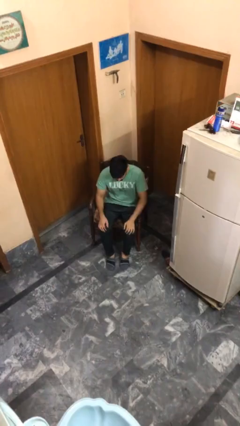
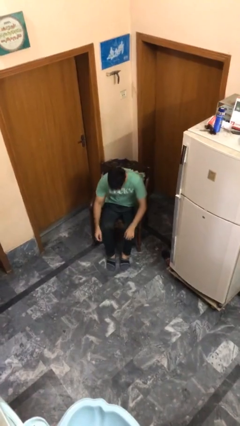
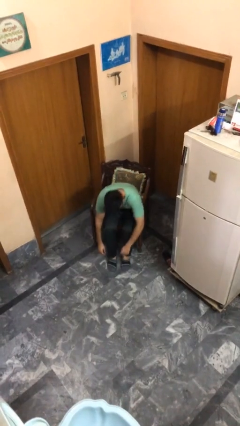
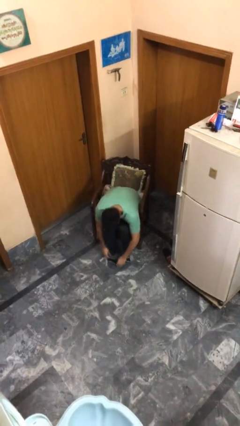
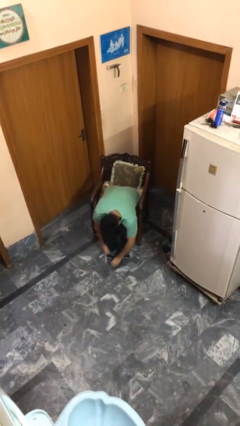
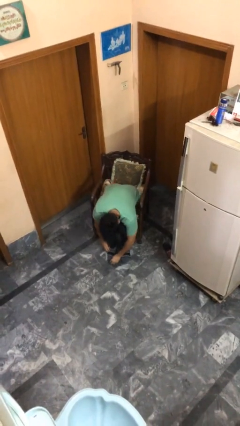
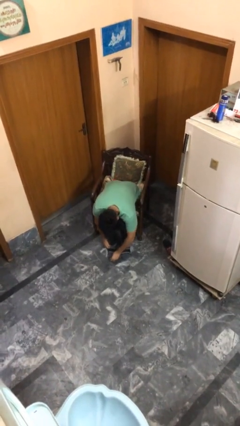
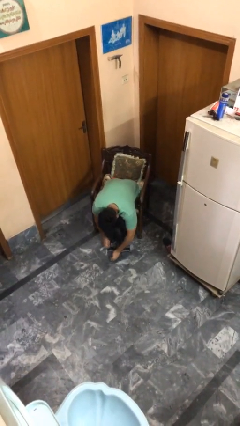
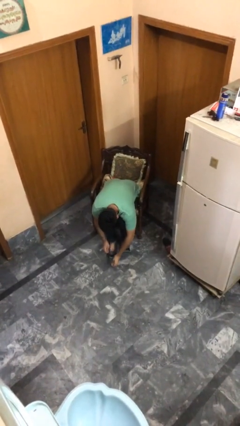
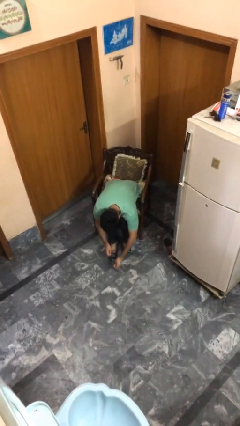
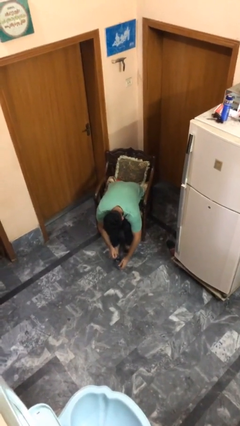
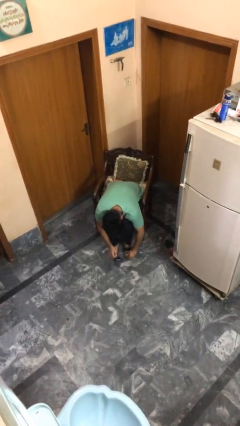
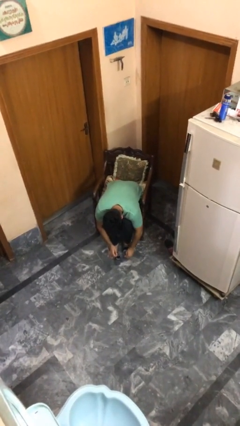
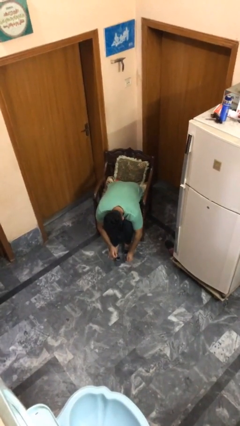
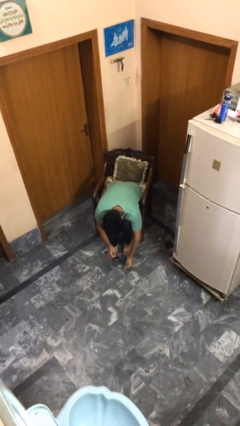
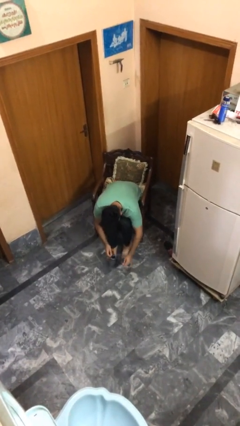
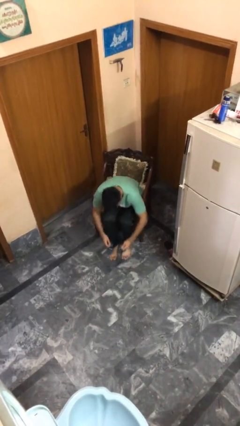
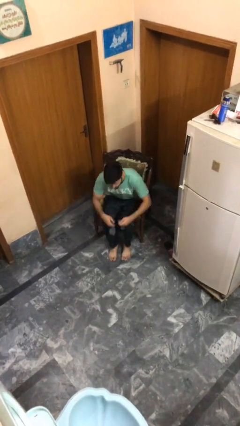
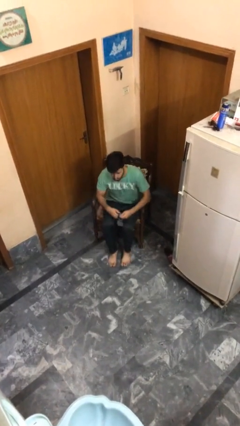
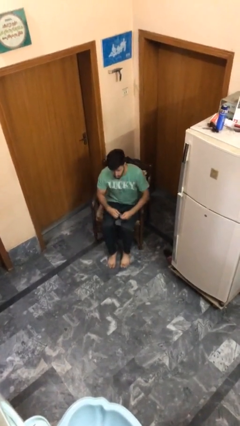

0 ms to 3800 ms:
person takes off socks

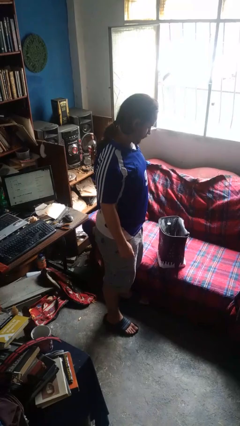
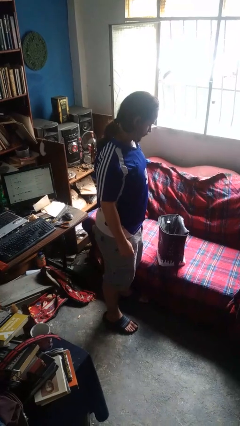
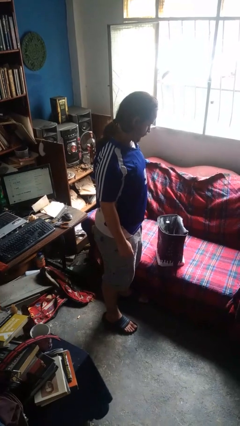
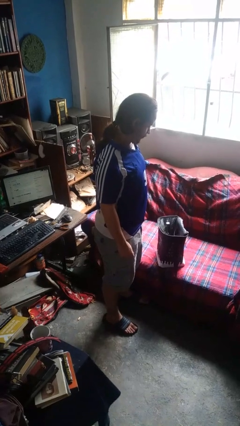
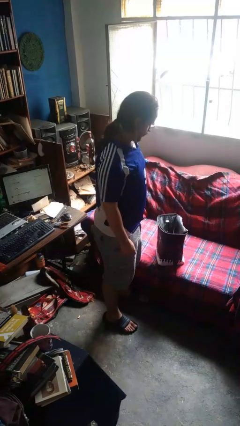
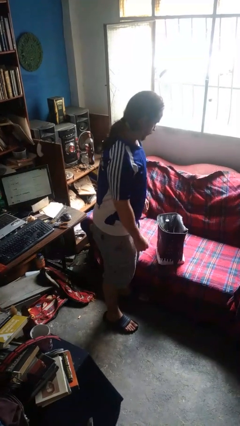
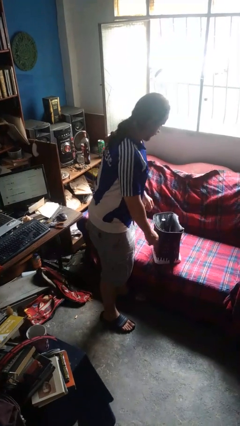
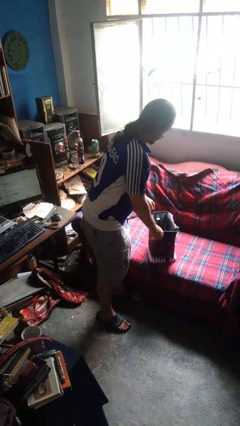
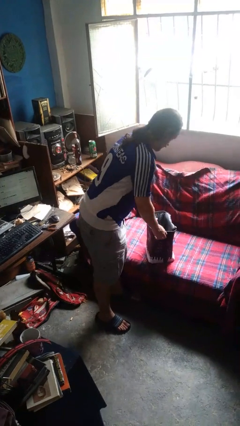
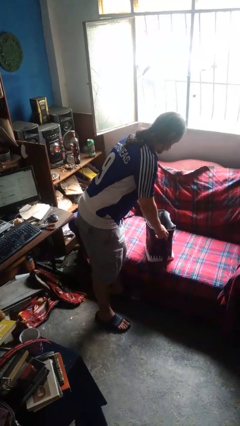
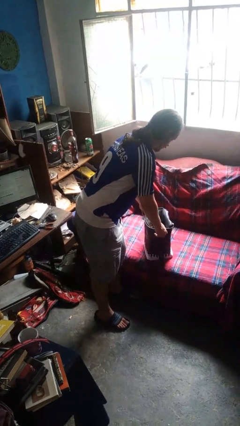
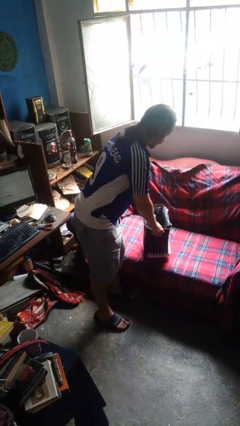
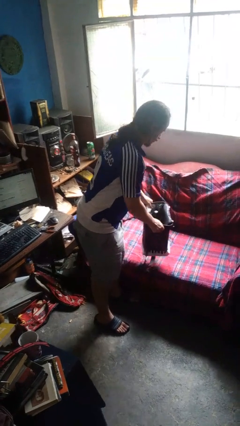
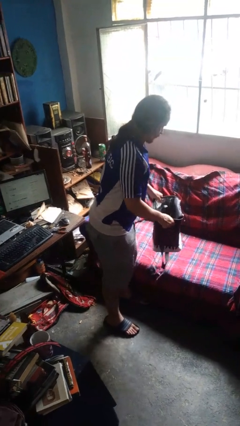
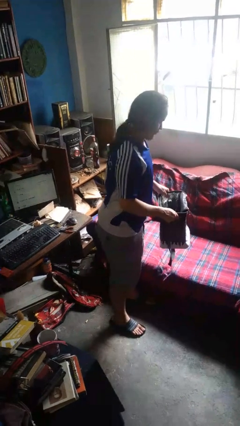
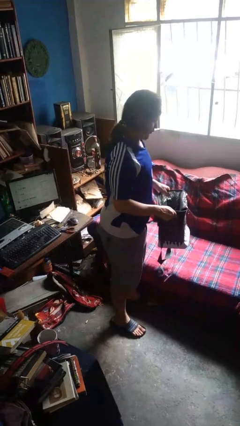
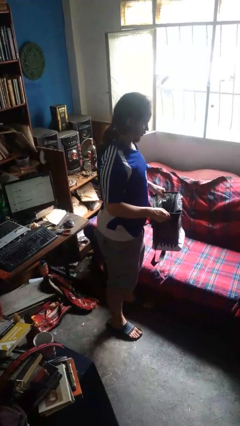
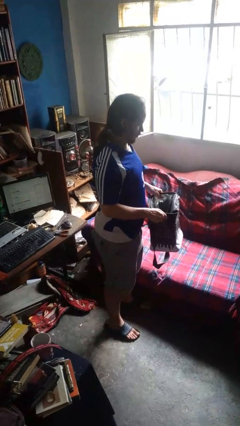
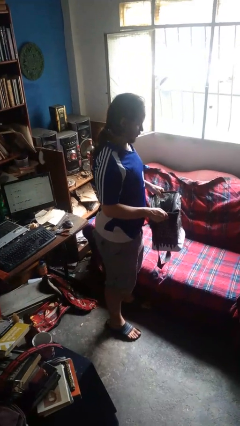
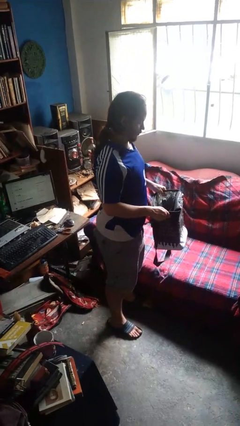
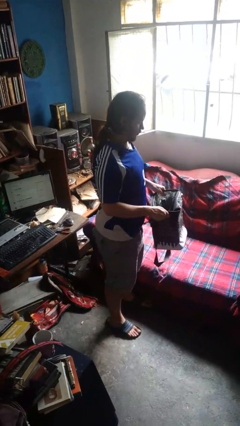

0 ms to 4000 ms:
person picks up object from couch

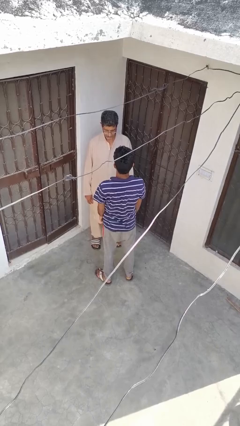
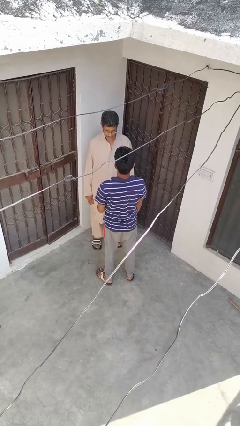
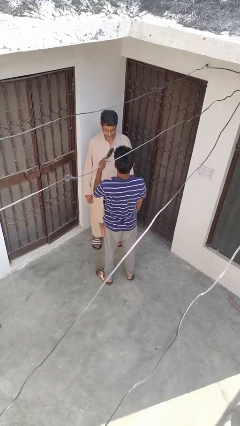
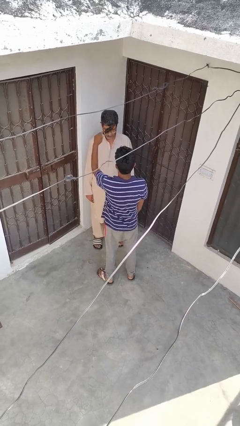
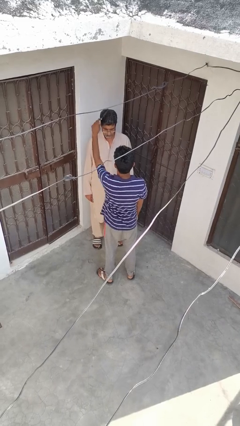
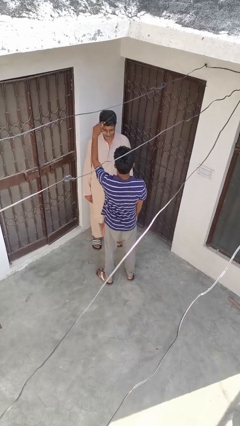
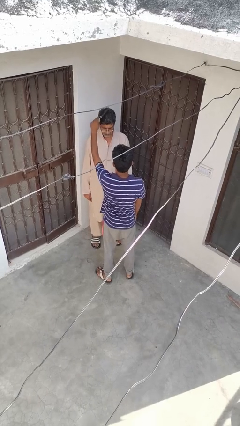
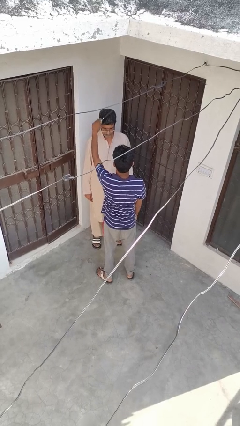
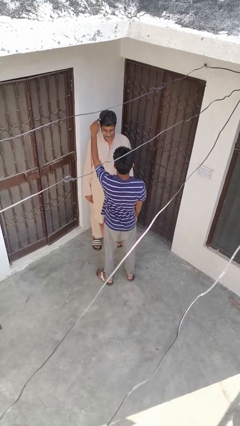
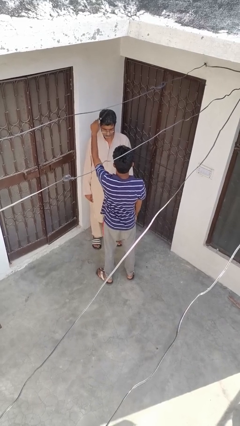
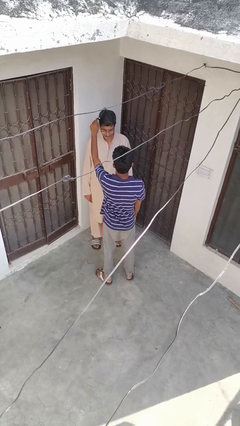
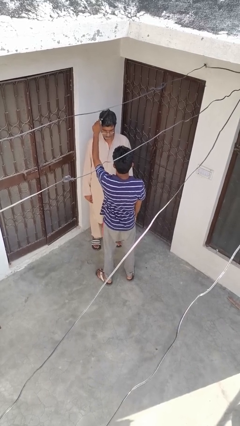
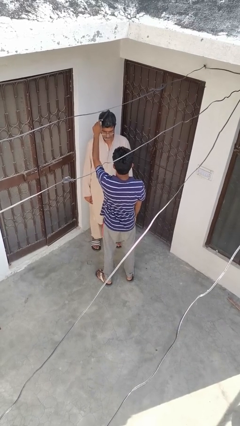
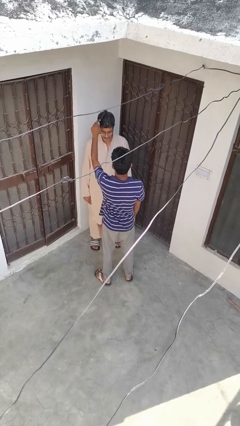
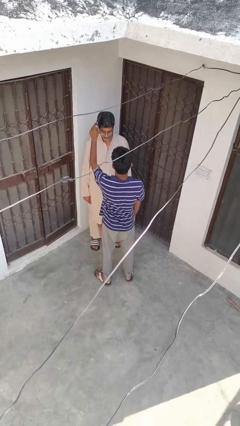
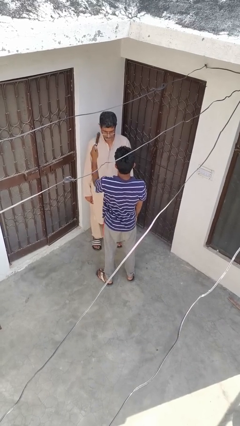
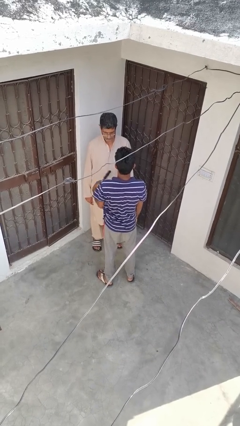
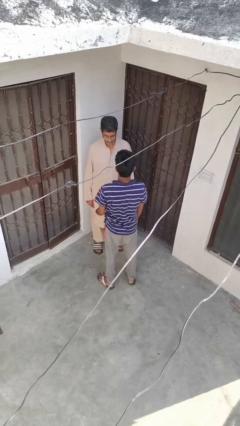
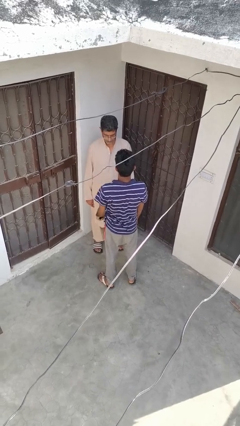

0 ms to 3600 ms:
person brushes hair of person

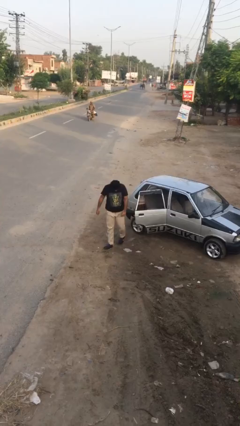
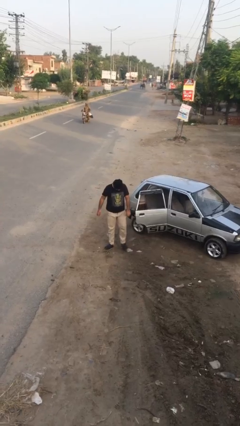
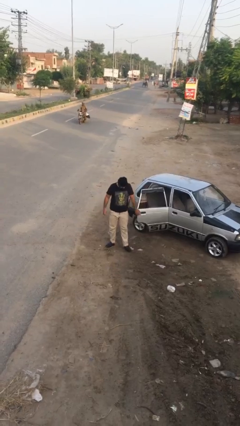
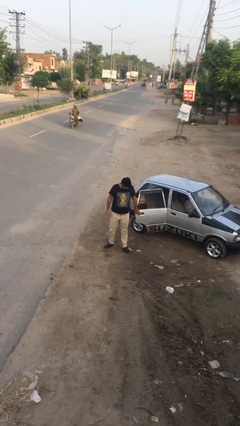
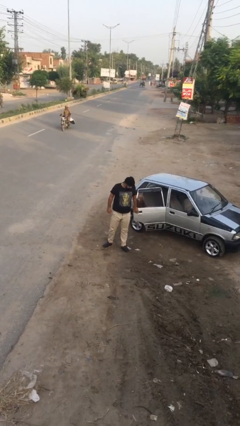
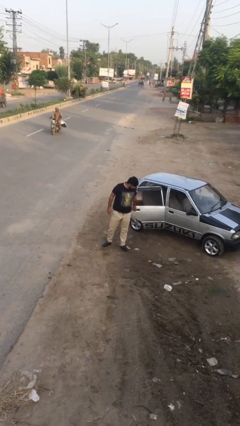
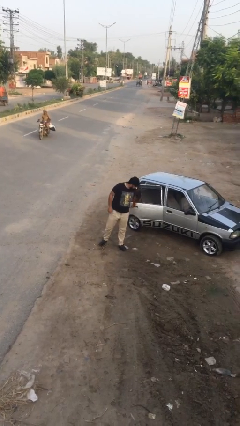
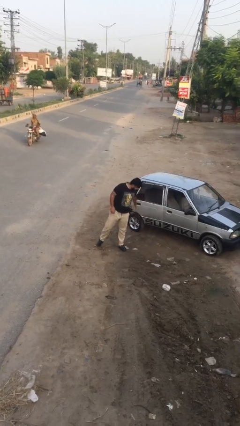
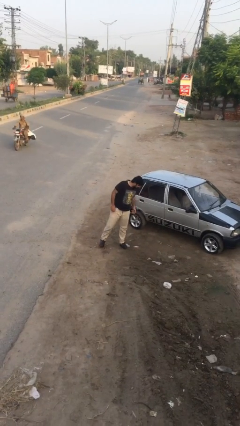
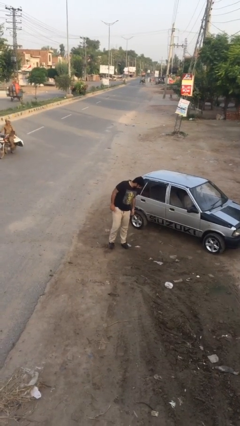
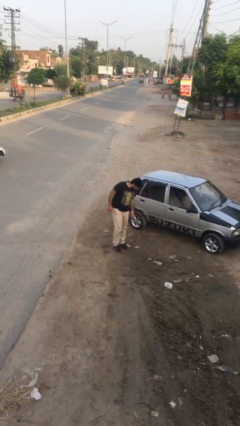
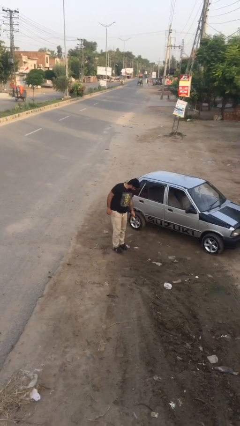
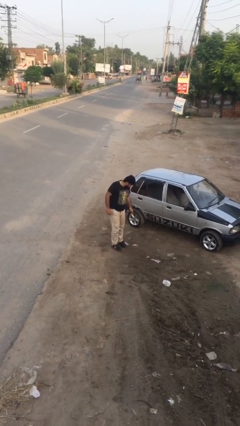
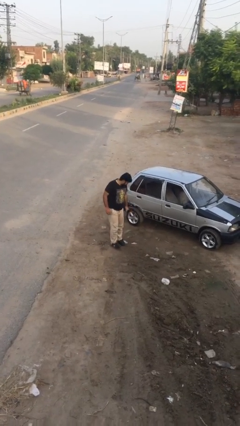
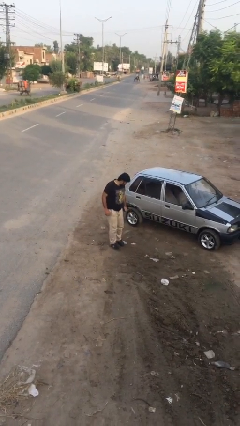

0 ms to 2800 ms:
person closes car door

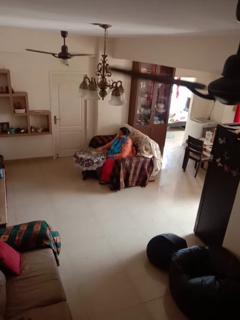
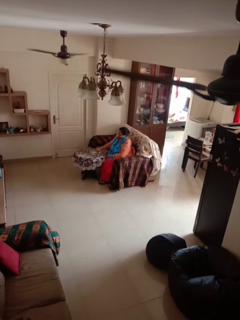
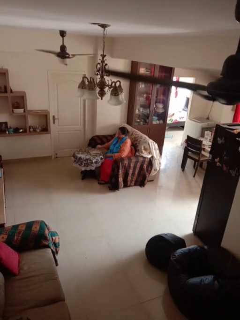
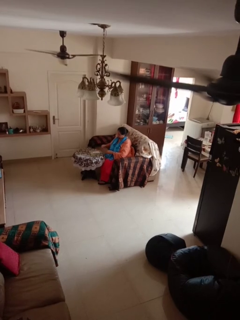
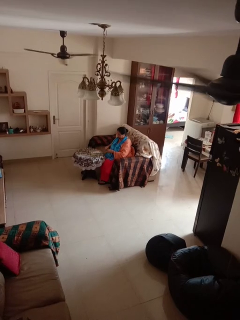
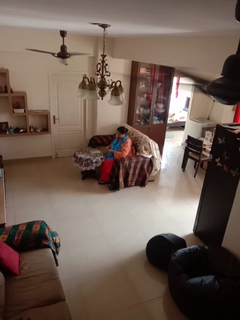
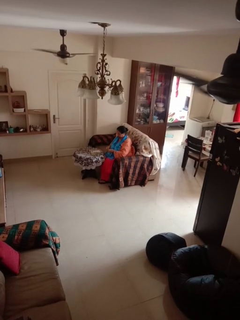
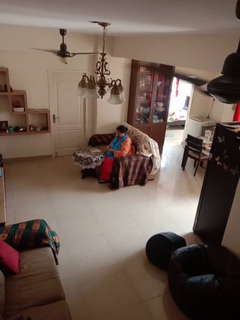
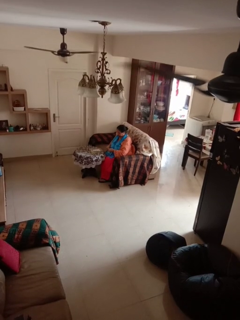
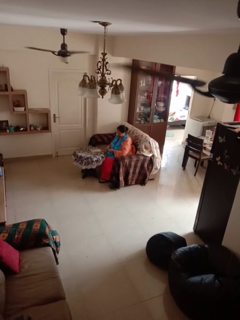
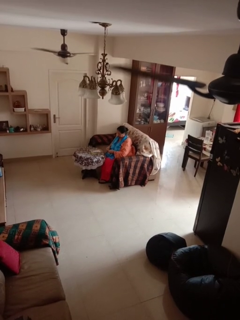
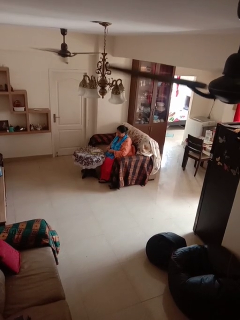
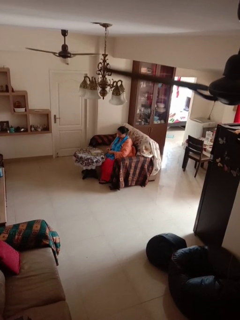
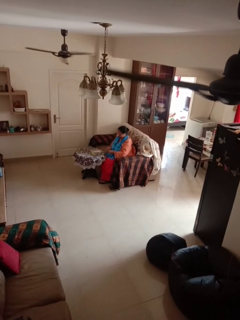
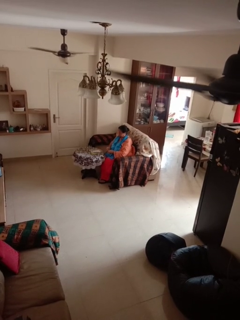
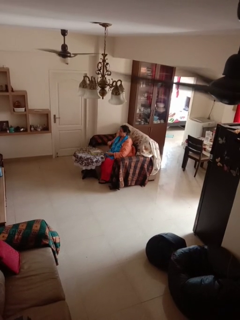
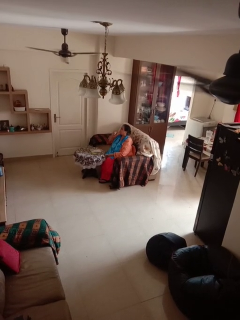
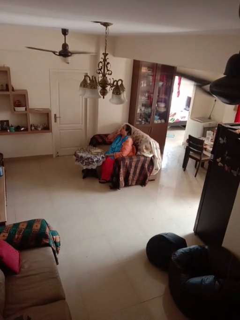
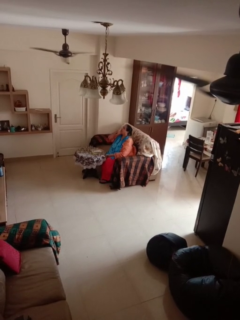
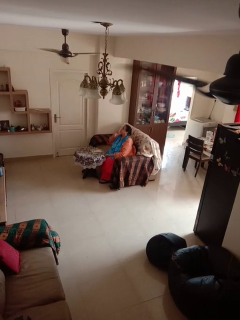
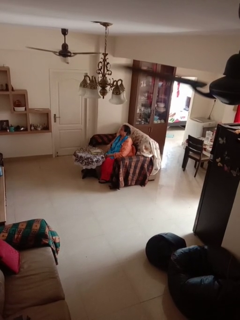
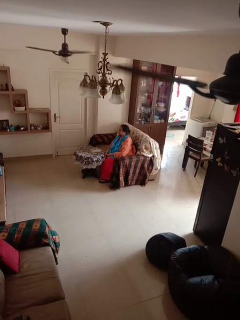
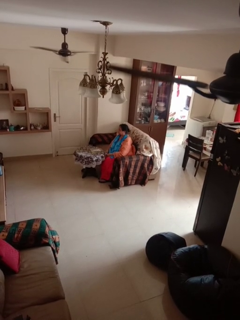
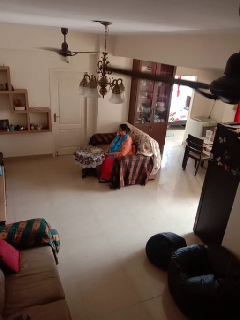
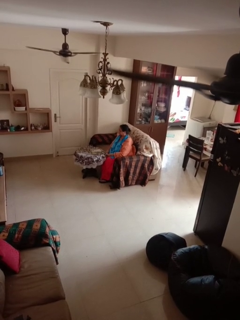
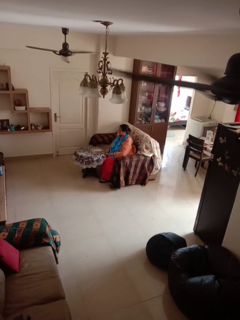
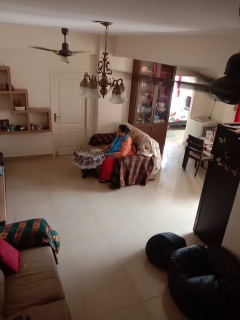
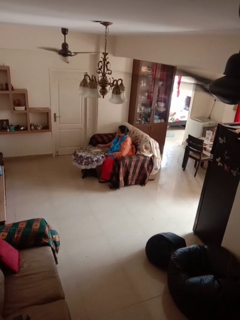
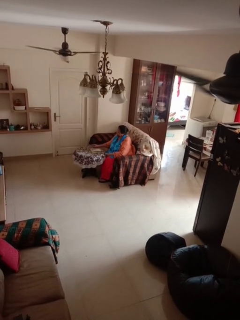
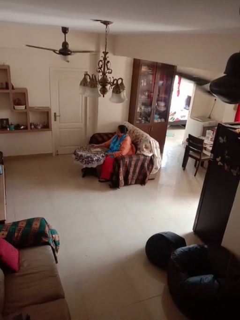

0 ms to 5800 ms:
person takes medicine pills
